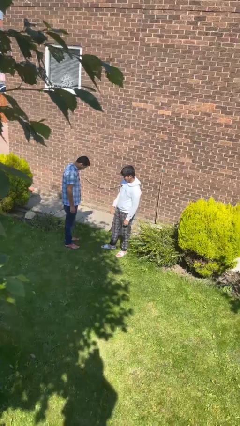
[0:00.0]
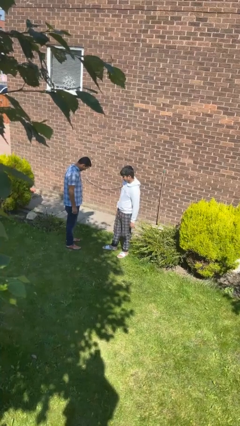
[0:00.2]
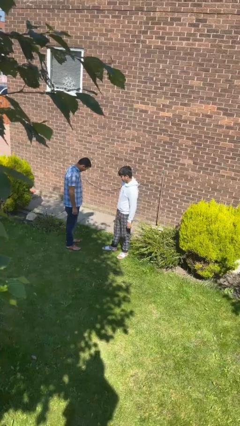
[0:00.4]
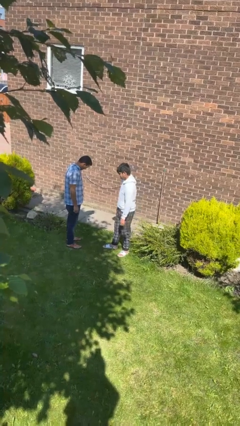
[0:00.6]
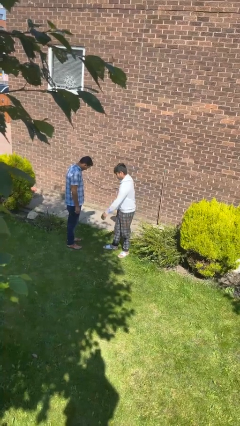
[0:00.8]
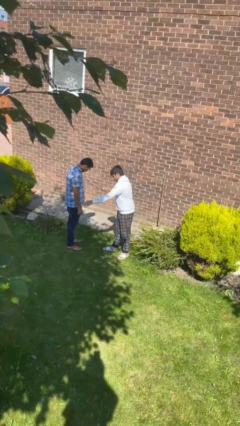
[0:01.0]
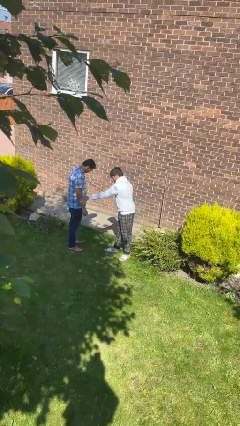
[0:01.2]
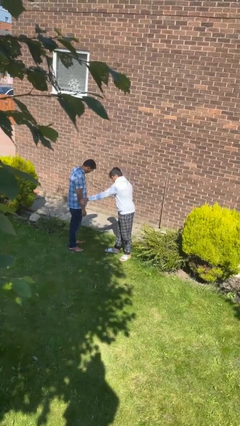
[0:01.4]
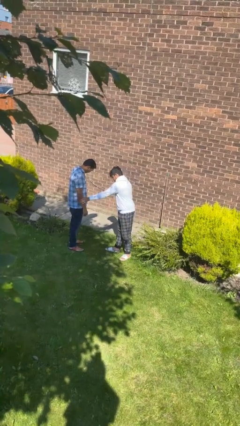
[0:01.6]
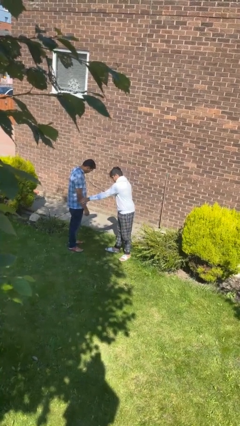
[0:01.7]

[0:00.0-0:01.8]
person grabs person by forearm

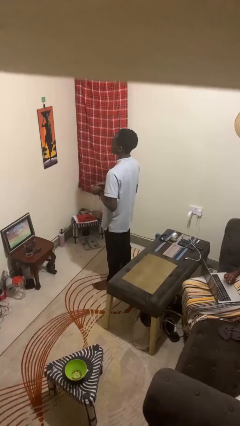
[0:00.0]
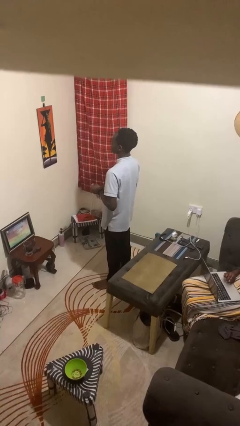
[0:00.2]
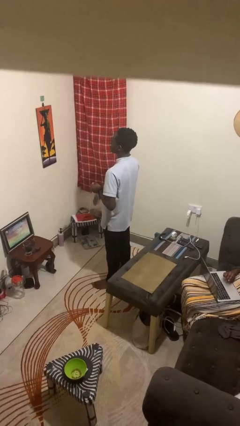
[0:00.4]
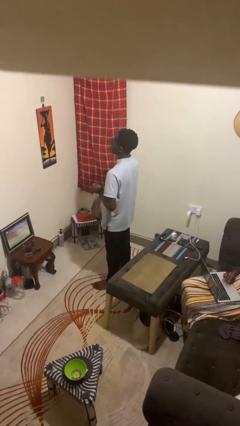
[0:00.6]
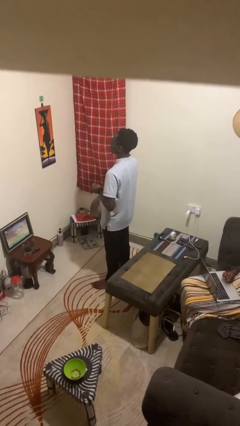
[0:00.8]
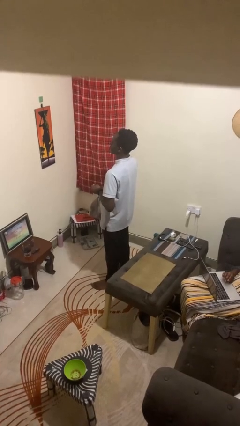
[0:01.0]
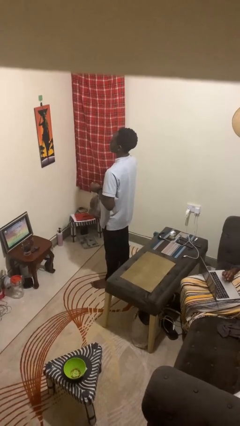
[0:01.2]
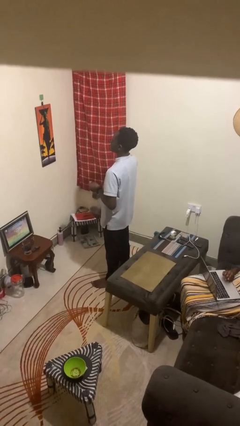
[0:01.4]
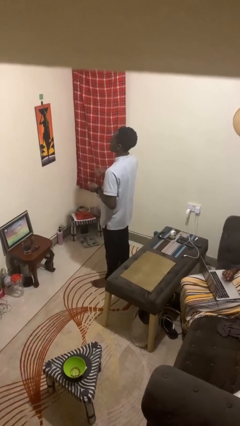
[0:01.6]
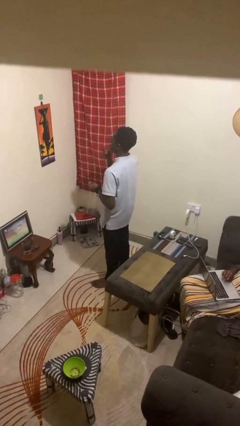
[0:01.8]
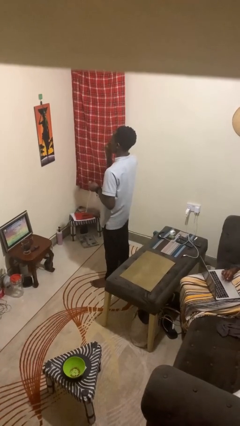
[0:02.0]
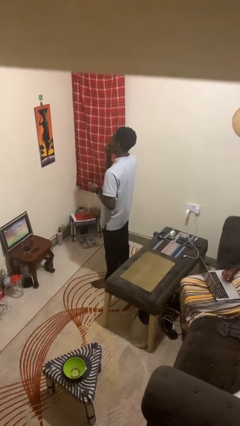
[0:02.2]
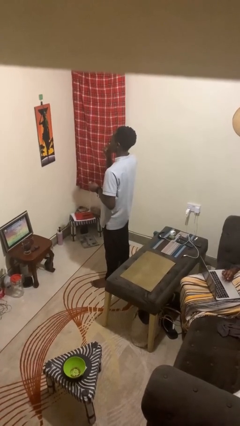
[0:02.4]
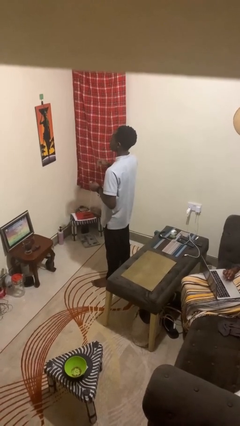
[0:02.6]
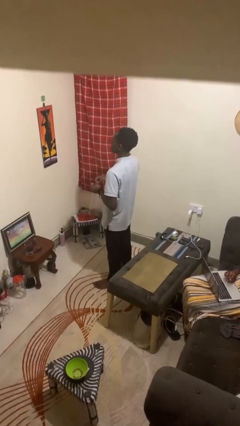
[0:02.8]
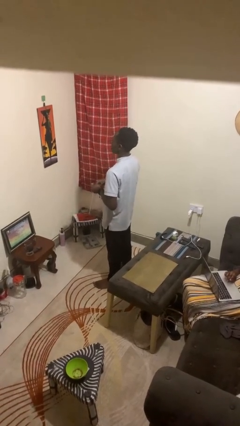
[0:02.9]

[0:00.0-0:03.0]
person eats snack from bag

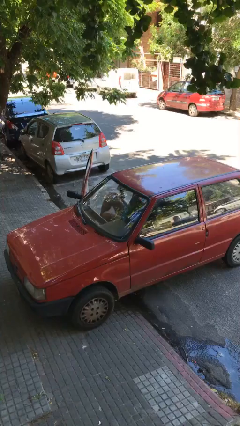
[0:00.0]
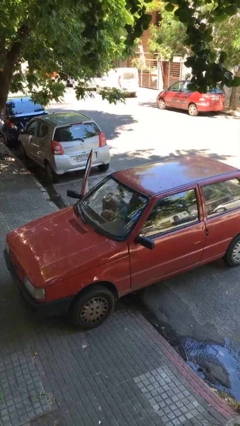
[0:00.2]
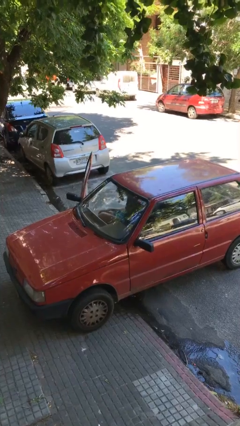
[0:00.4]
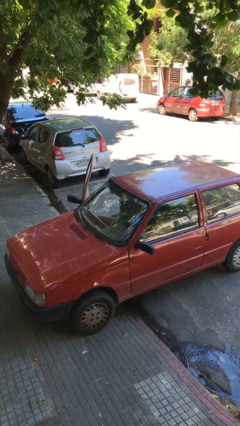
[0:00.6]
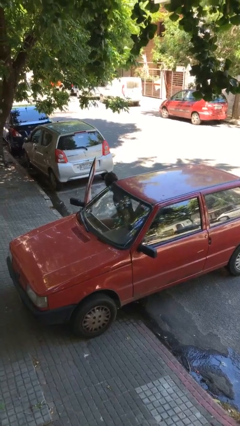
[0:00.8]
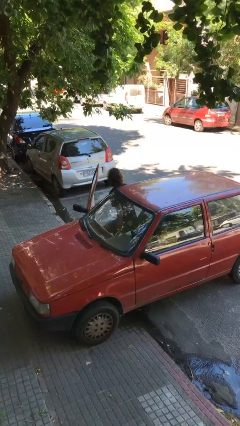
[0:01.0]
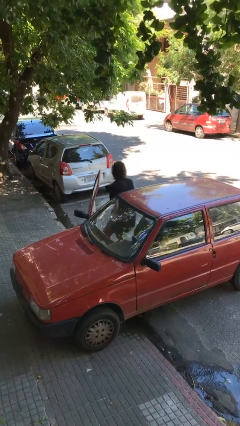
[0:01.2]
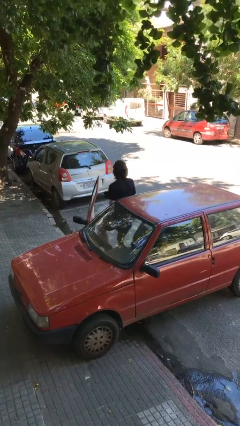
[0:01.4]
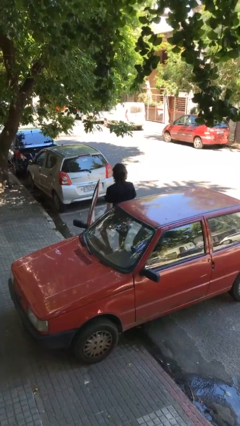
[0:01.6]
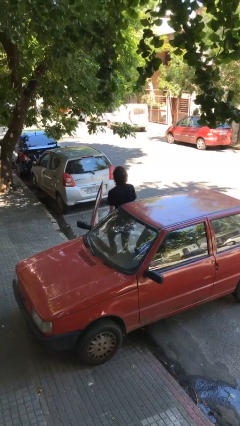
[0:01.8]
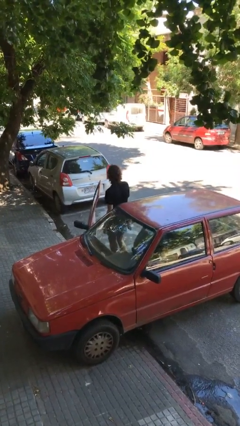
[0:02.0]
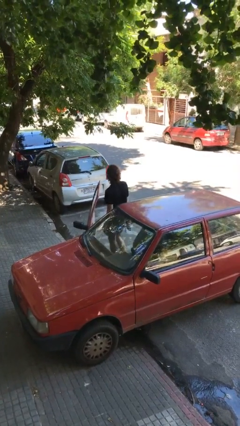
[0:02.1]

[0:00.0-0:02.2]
person exits car

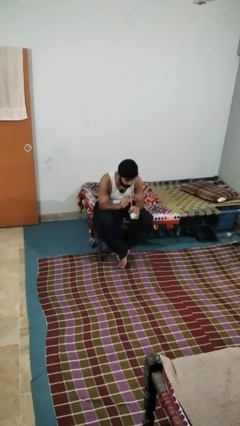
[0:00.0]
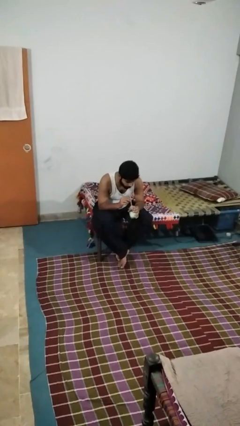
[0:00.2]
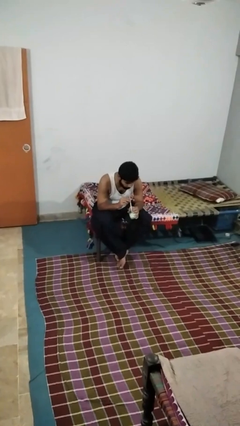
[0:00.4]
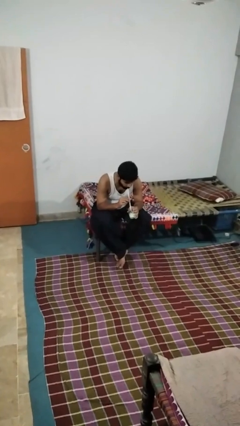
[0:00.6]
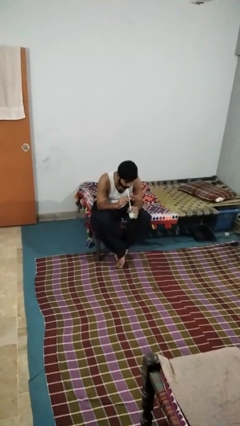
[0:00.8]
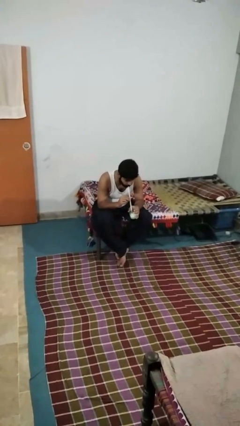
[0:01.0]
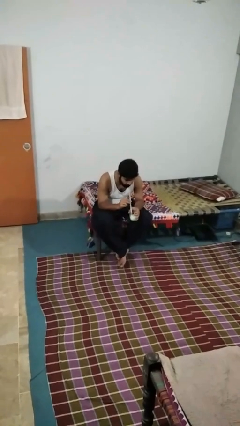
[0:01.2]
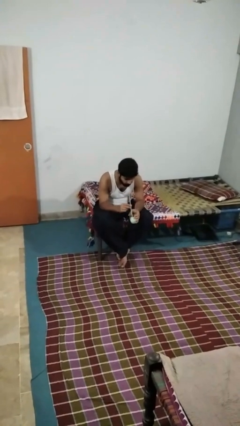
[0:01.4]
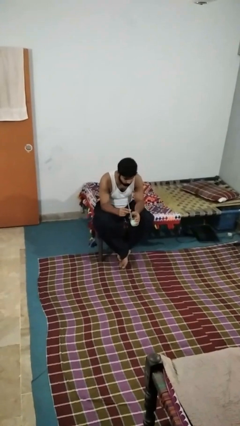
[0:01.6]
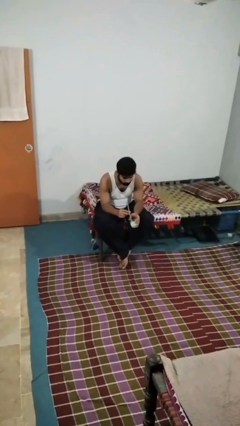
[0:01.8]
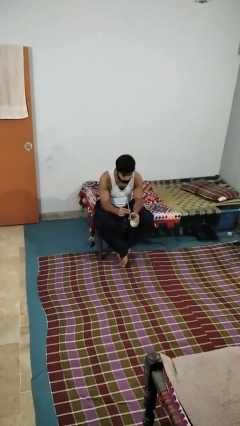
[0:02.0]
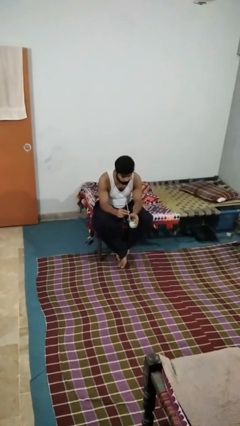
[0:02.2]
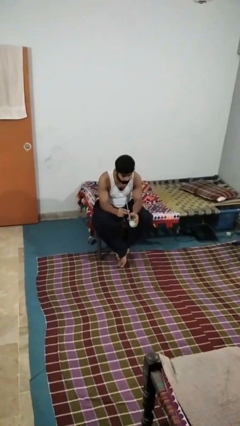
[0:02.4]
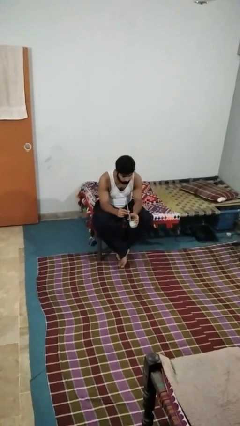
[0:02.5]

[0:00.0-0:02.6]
person drinks from straw

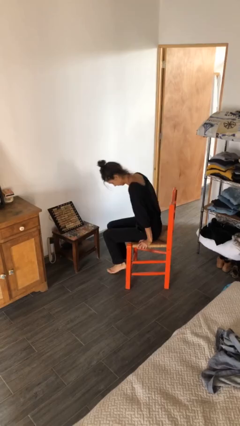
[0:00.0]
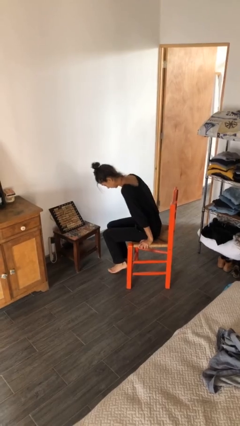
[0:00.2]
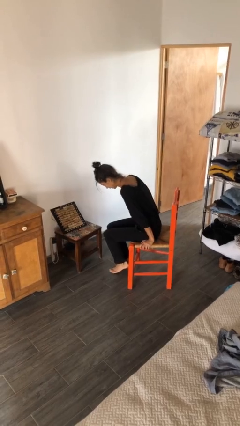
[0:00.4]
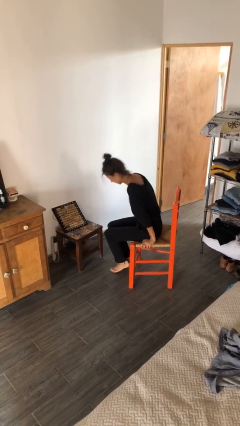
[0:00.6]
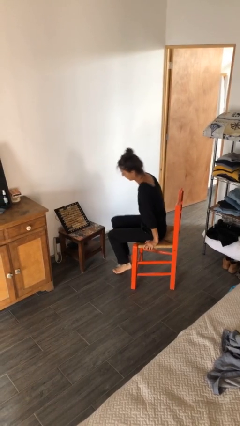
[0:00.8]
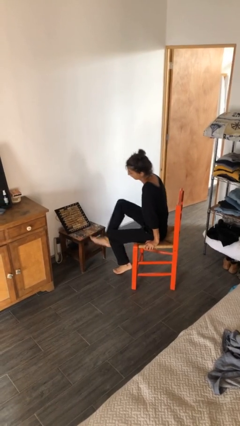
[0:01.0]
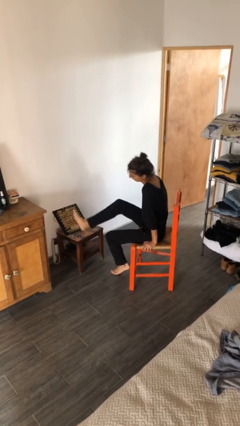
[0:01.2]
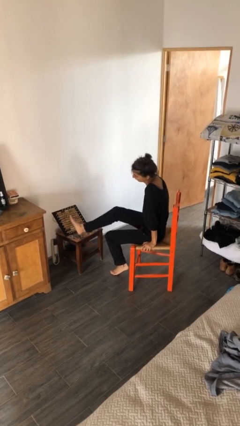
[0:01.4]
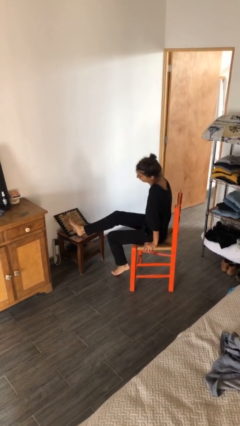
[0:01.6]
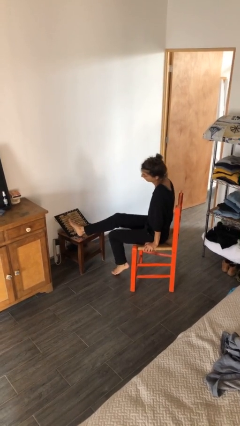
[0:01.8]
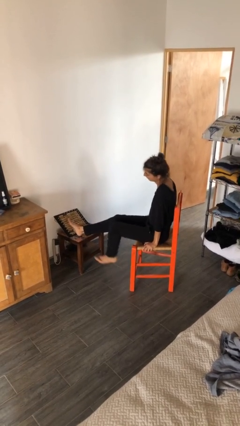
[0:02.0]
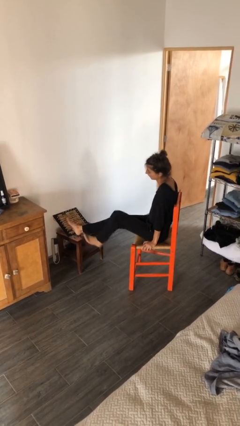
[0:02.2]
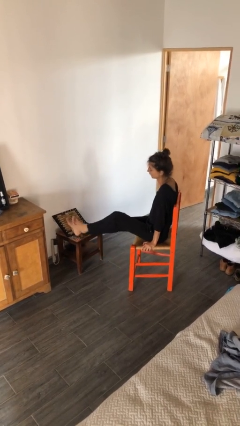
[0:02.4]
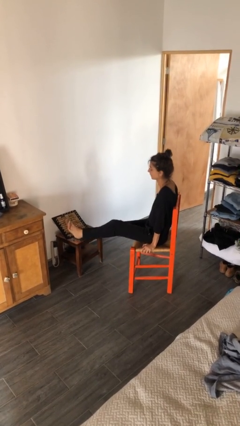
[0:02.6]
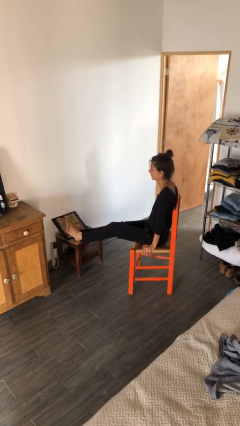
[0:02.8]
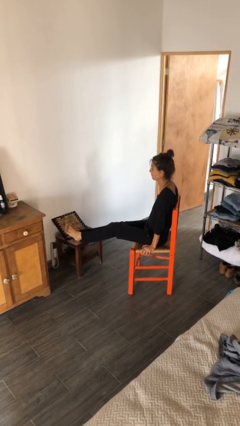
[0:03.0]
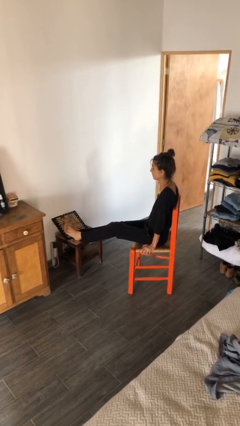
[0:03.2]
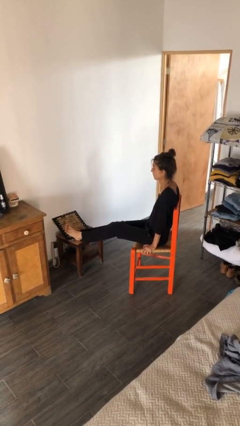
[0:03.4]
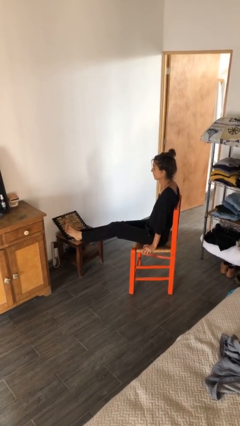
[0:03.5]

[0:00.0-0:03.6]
person puts feet up

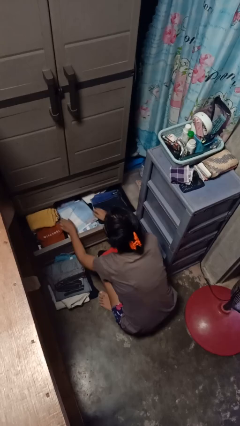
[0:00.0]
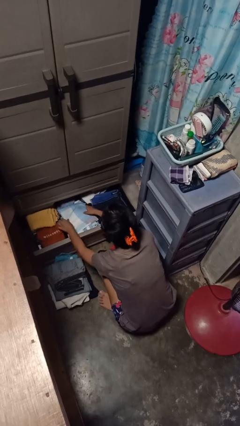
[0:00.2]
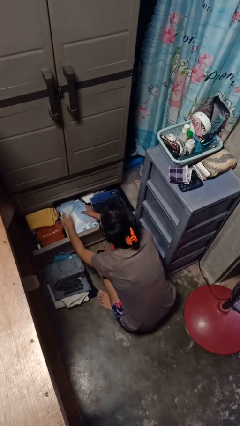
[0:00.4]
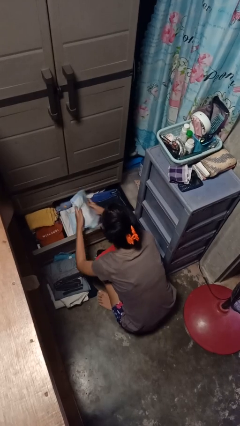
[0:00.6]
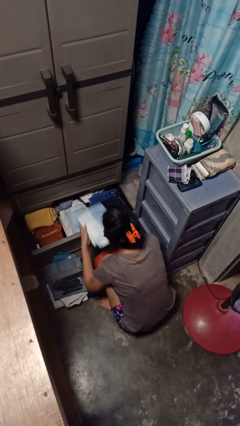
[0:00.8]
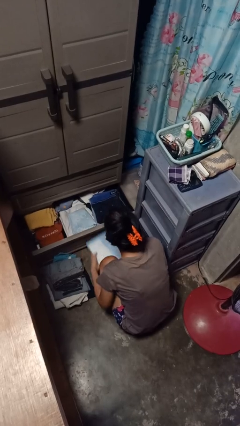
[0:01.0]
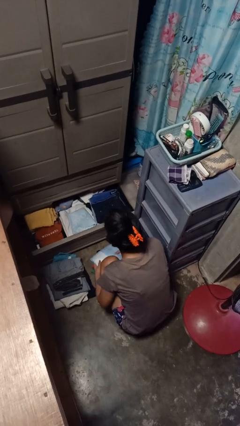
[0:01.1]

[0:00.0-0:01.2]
person takes clothes from dresser

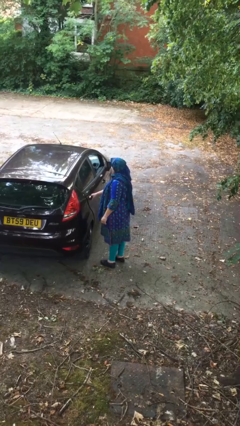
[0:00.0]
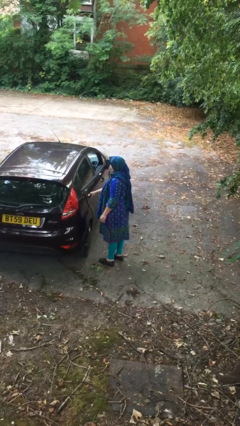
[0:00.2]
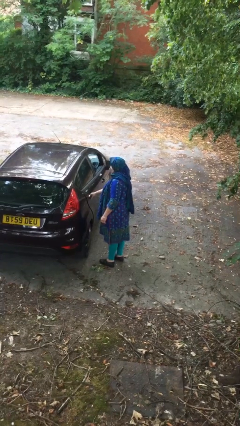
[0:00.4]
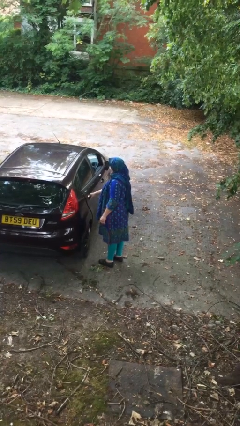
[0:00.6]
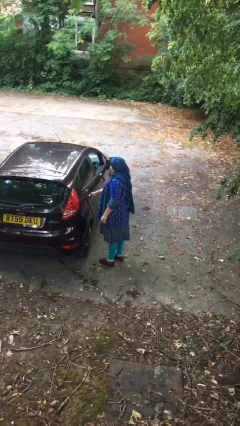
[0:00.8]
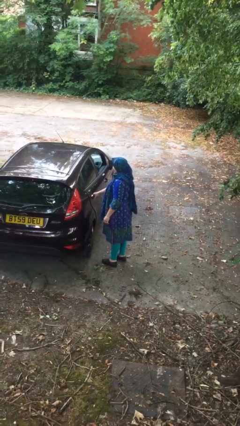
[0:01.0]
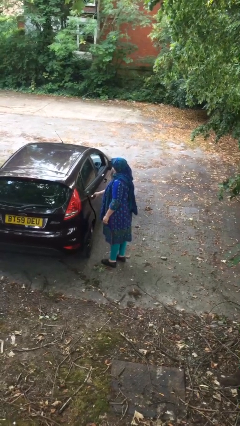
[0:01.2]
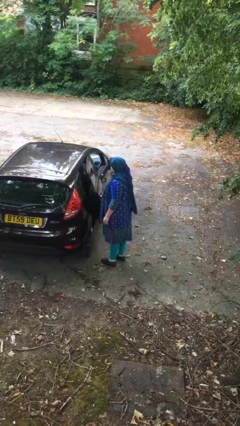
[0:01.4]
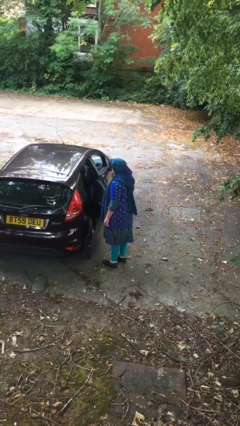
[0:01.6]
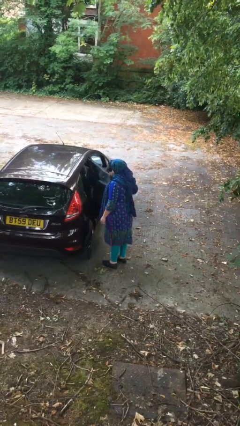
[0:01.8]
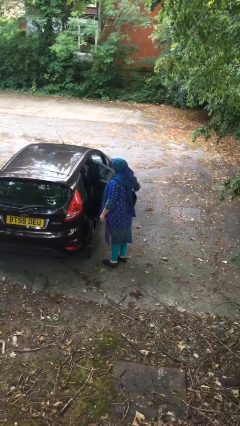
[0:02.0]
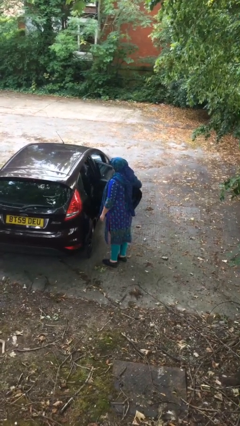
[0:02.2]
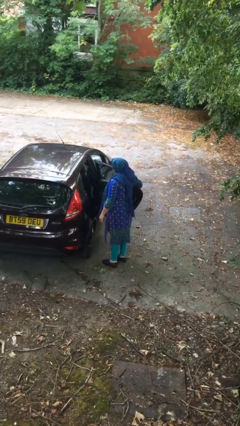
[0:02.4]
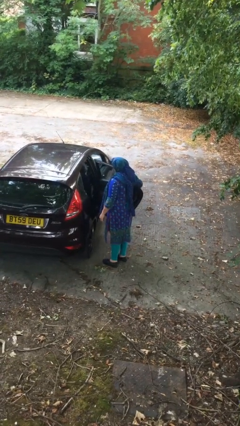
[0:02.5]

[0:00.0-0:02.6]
person opens car door

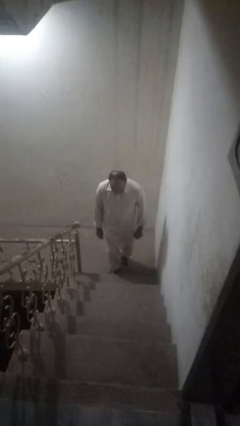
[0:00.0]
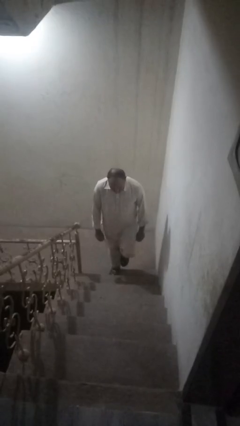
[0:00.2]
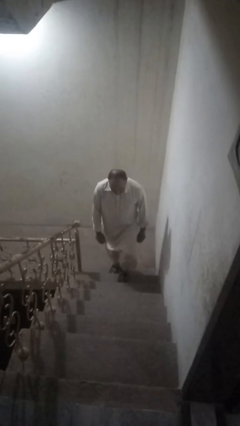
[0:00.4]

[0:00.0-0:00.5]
person climbs down stairs
